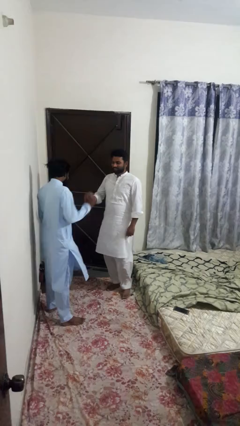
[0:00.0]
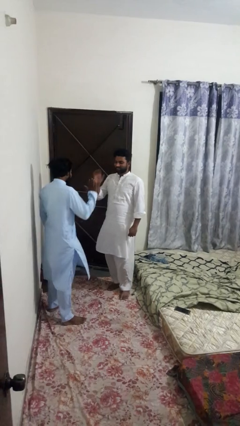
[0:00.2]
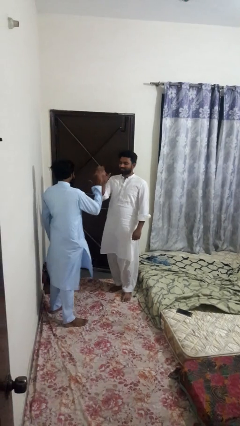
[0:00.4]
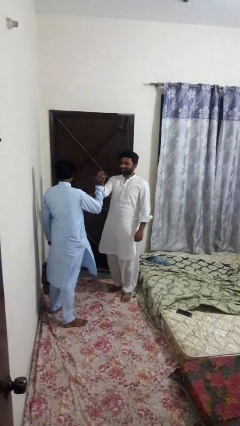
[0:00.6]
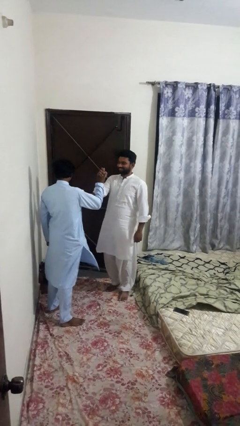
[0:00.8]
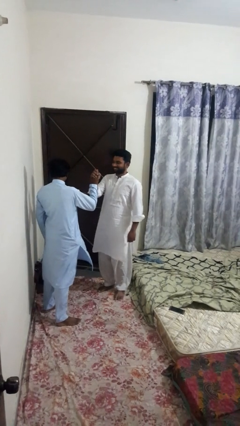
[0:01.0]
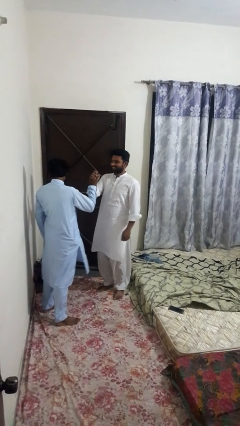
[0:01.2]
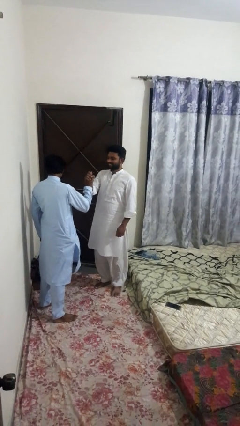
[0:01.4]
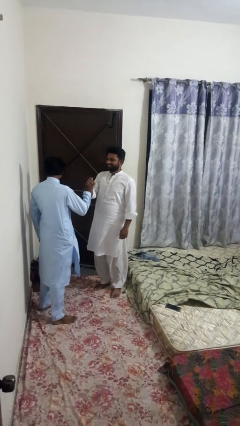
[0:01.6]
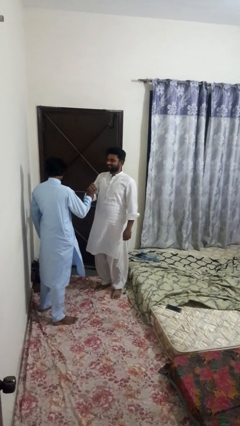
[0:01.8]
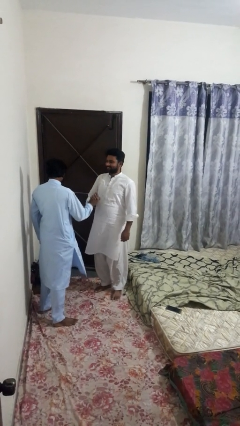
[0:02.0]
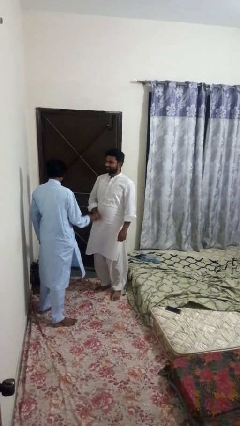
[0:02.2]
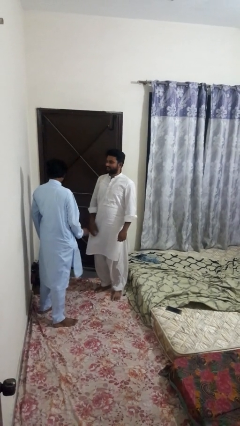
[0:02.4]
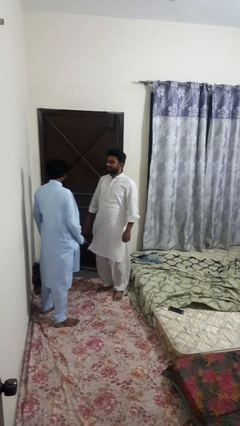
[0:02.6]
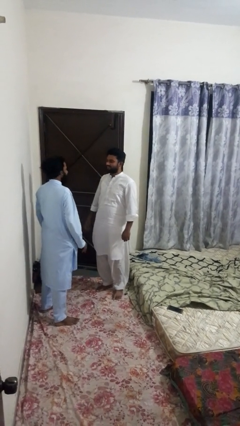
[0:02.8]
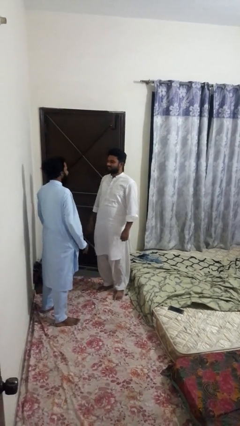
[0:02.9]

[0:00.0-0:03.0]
person highfives hand

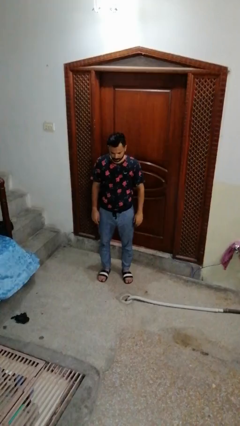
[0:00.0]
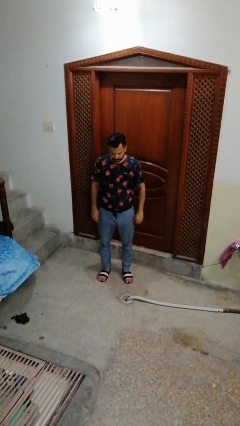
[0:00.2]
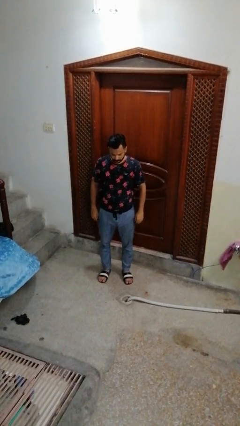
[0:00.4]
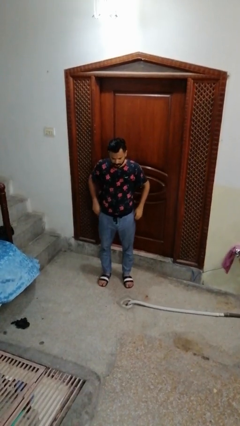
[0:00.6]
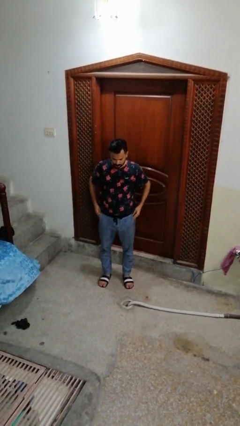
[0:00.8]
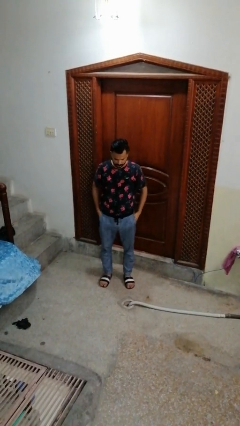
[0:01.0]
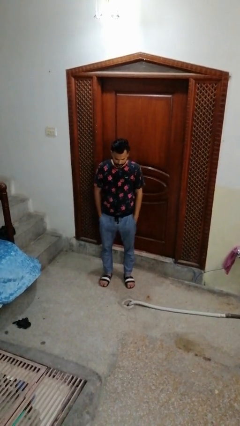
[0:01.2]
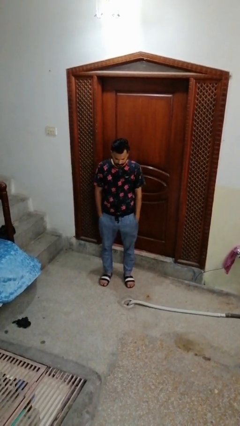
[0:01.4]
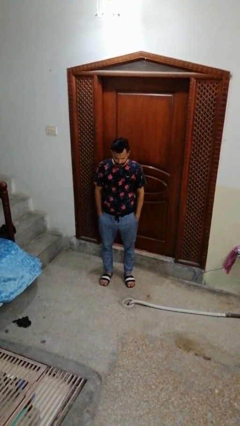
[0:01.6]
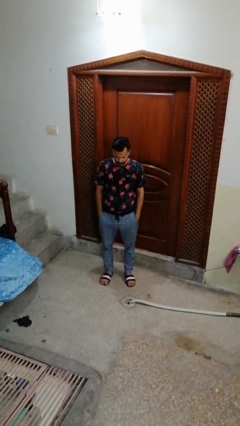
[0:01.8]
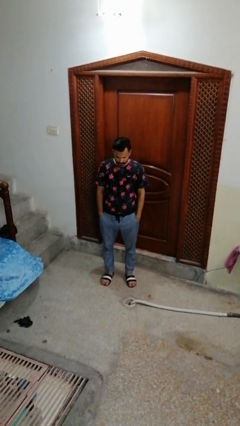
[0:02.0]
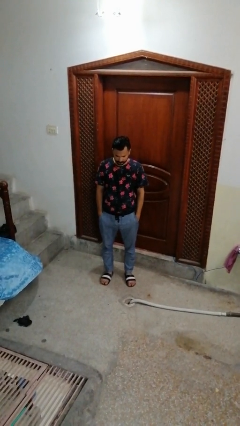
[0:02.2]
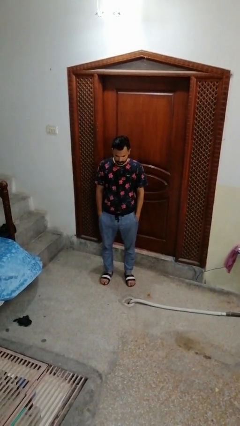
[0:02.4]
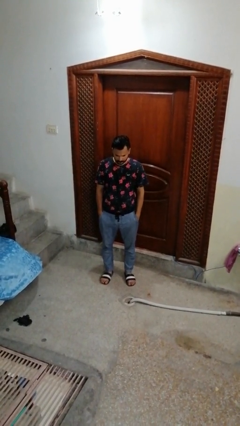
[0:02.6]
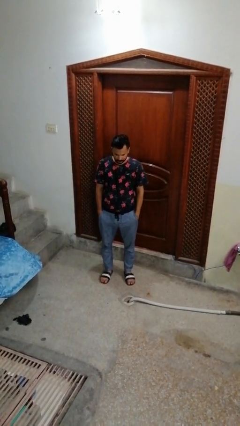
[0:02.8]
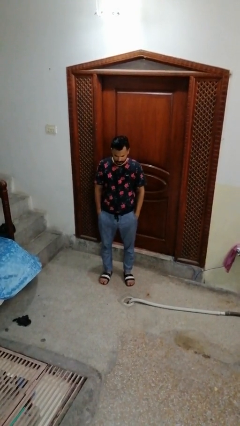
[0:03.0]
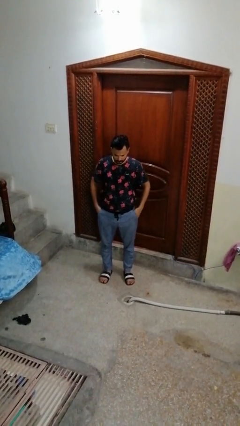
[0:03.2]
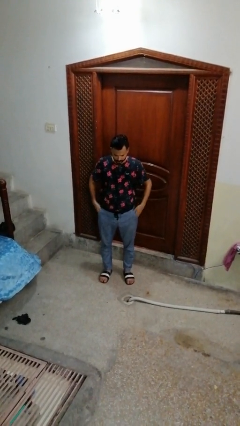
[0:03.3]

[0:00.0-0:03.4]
person puts hands in back pockets

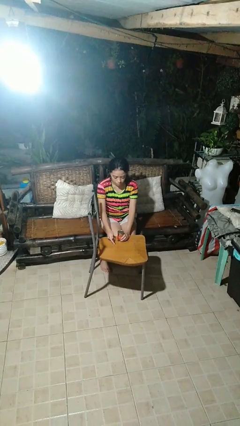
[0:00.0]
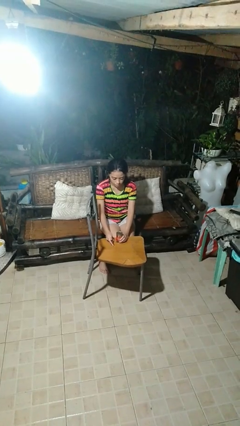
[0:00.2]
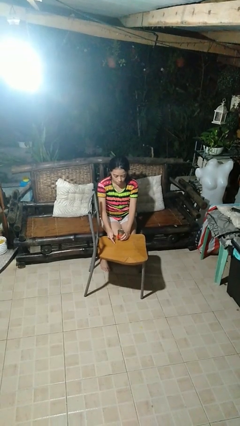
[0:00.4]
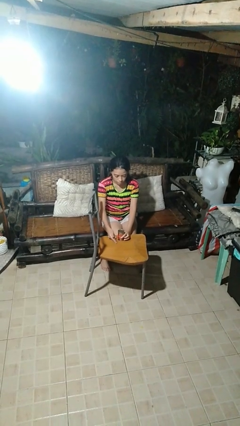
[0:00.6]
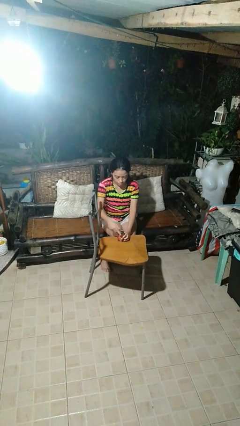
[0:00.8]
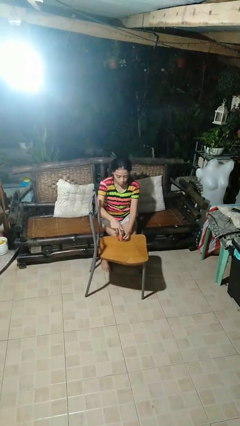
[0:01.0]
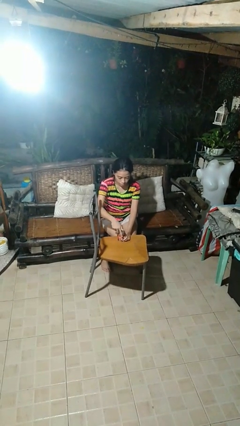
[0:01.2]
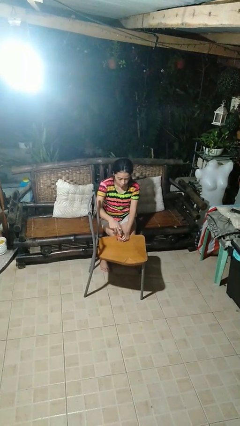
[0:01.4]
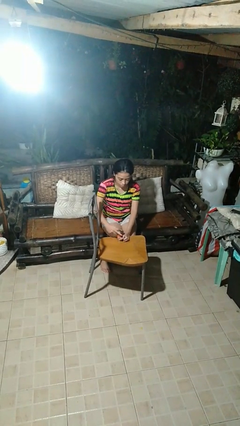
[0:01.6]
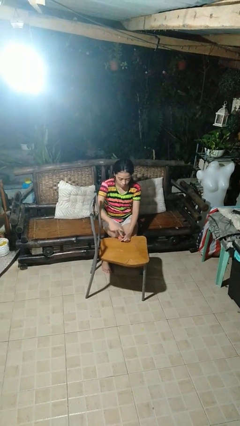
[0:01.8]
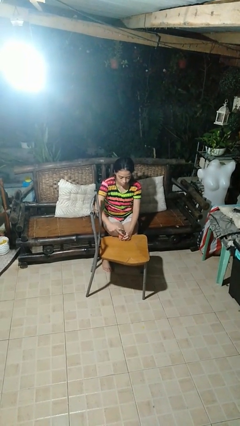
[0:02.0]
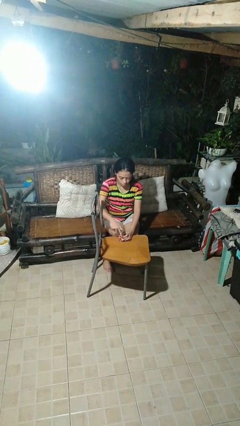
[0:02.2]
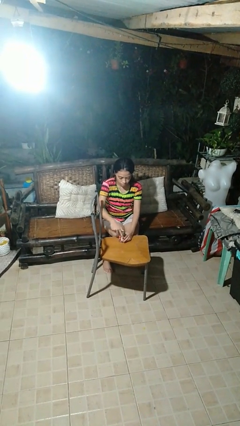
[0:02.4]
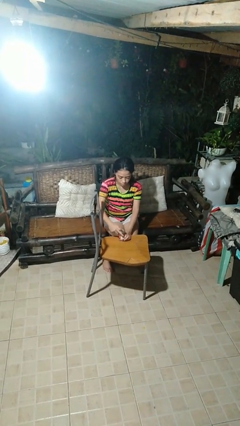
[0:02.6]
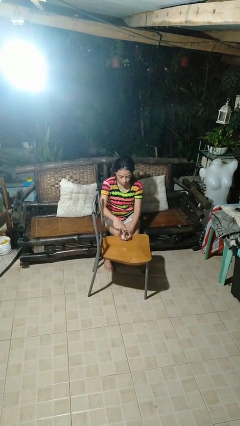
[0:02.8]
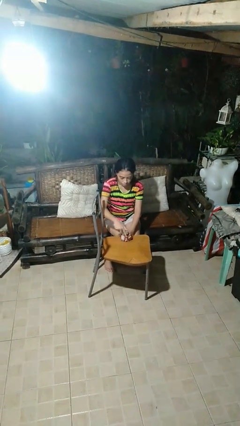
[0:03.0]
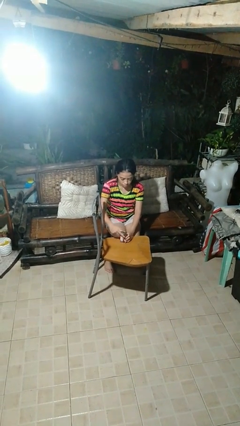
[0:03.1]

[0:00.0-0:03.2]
person opens can with can opener

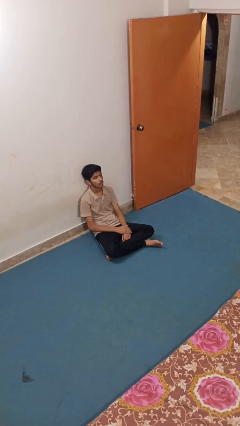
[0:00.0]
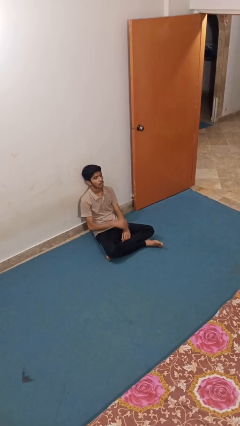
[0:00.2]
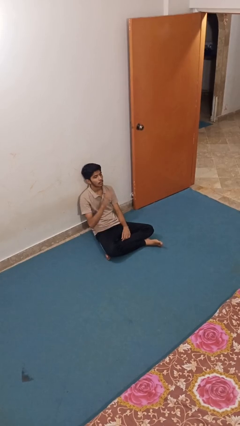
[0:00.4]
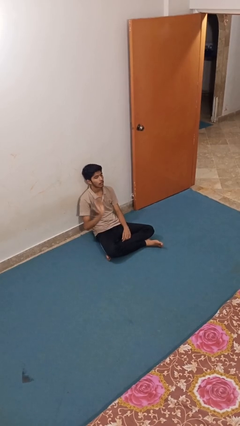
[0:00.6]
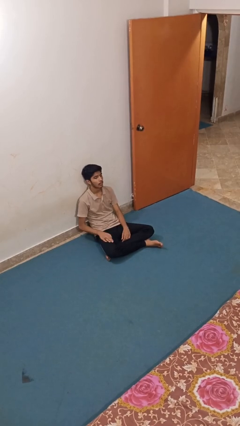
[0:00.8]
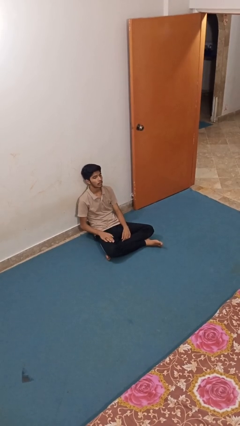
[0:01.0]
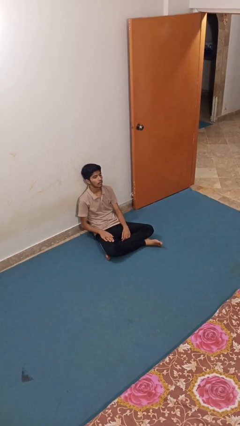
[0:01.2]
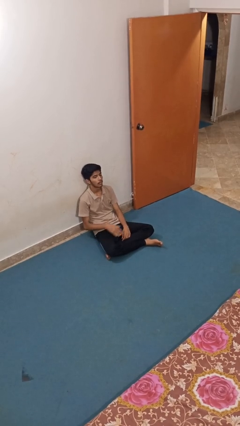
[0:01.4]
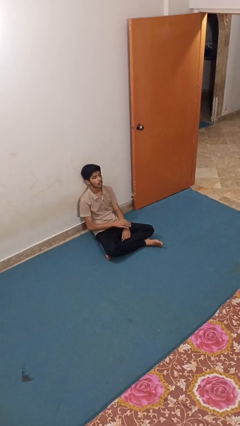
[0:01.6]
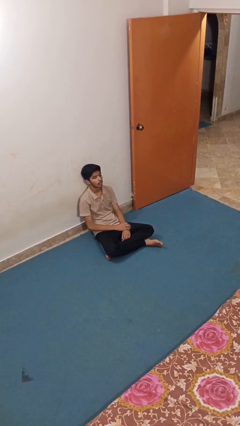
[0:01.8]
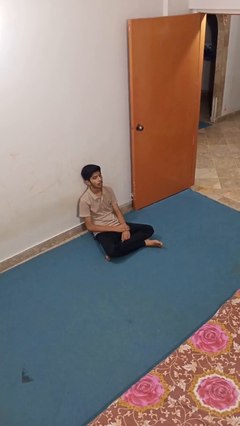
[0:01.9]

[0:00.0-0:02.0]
person slaps hands on thighs

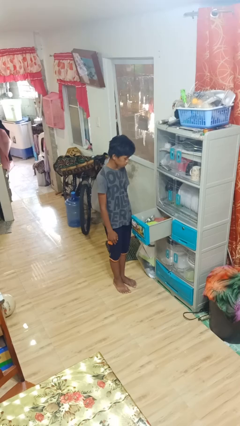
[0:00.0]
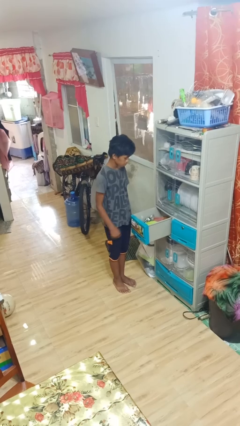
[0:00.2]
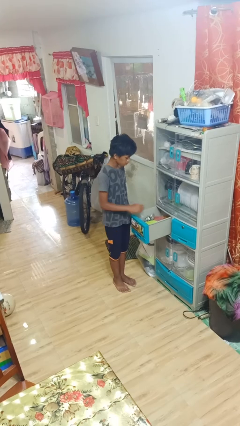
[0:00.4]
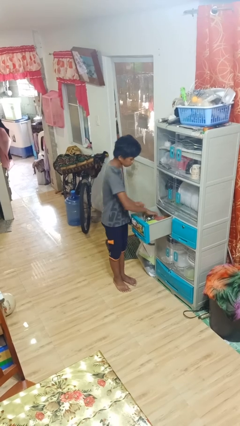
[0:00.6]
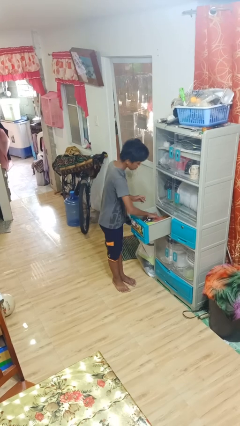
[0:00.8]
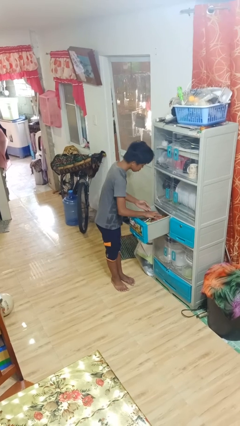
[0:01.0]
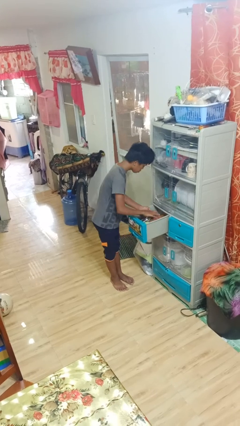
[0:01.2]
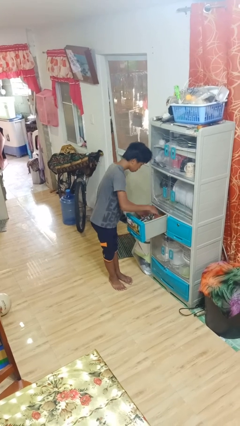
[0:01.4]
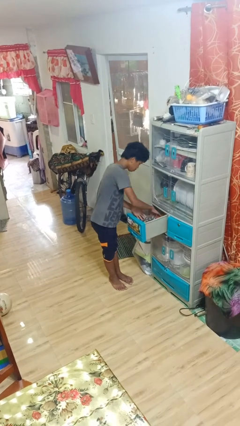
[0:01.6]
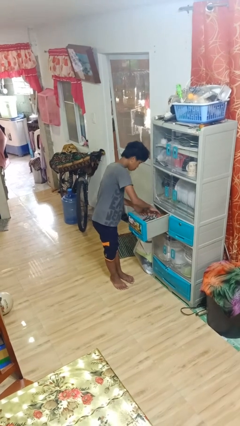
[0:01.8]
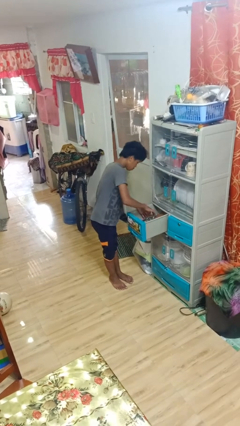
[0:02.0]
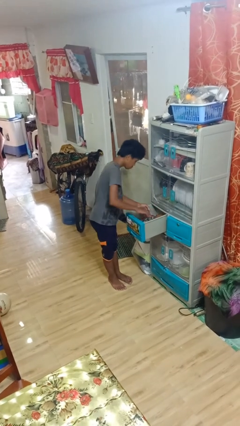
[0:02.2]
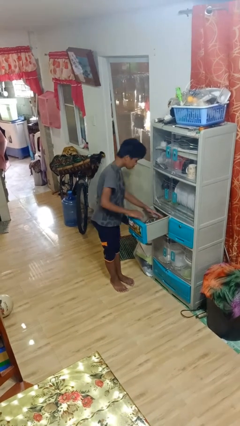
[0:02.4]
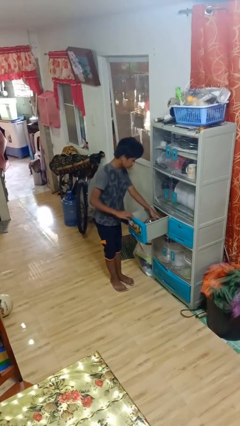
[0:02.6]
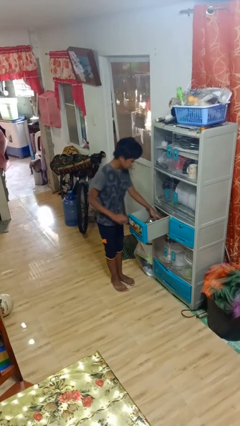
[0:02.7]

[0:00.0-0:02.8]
person searches in kitchen drawer

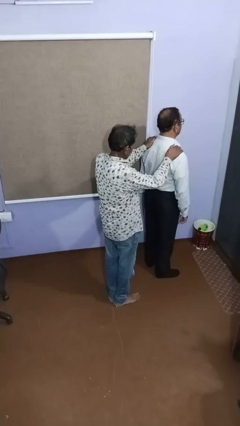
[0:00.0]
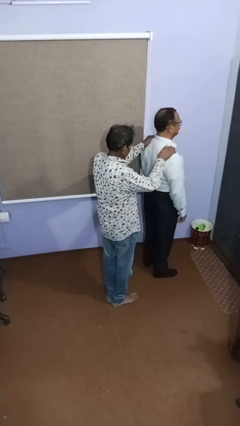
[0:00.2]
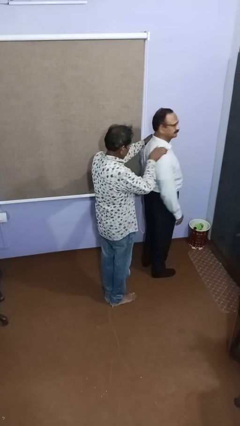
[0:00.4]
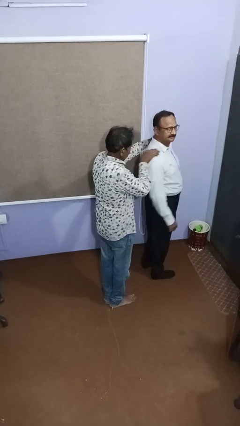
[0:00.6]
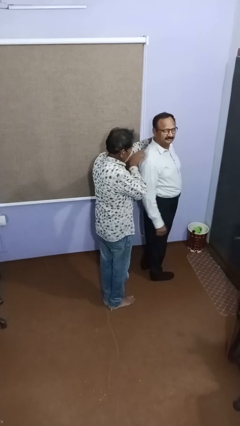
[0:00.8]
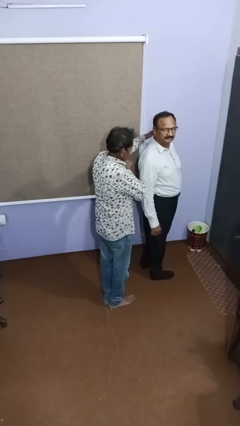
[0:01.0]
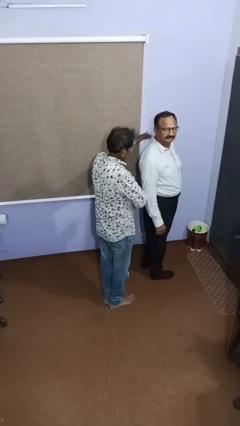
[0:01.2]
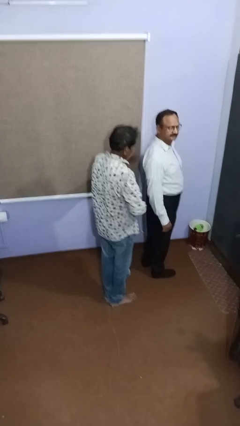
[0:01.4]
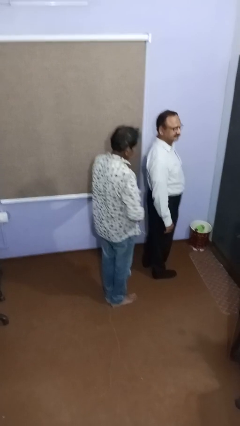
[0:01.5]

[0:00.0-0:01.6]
person spins person around

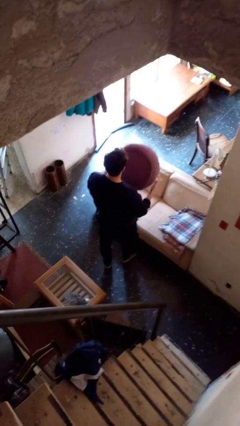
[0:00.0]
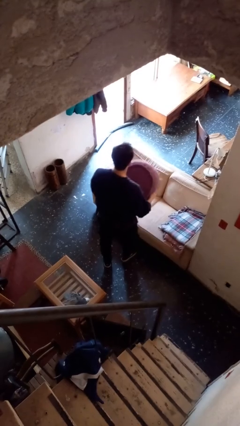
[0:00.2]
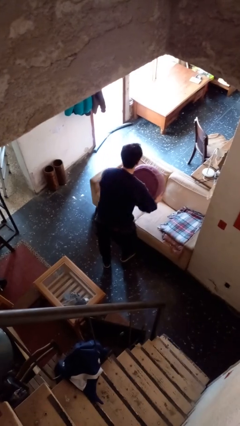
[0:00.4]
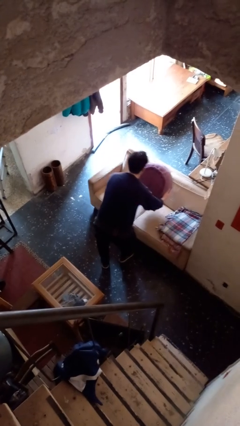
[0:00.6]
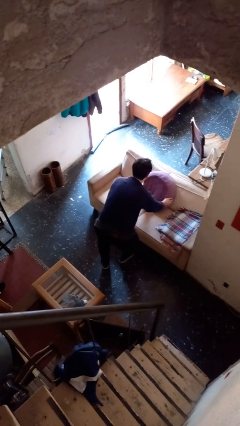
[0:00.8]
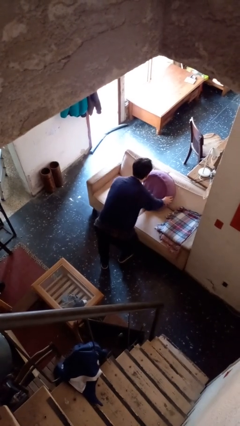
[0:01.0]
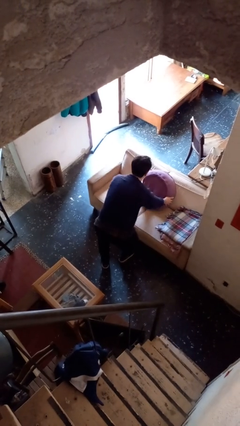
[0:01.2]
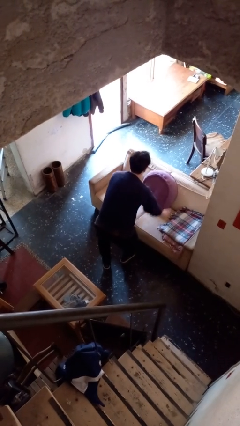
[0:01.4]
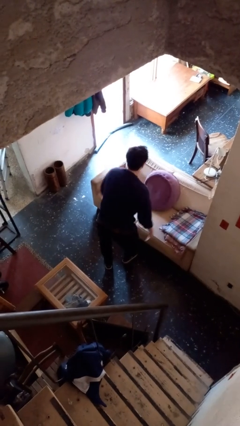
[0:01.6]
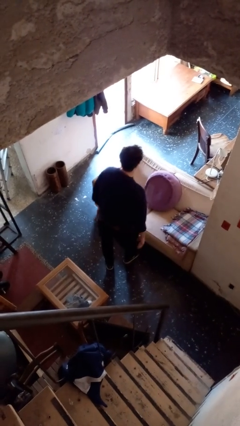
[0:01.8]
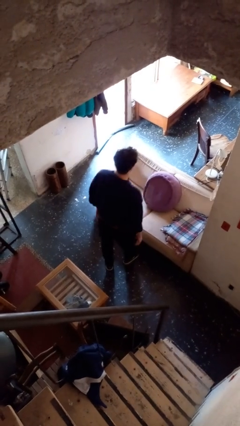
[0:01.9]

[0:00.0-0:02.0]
person puts down object on couch
